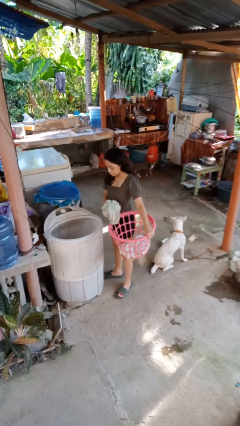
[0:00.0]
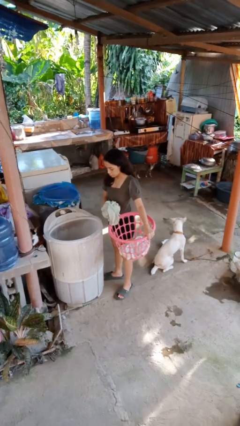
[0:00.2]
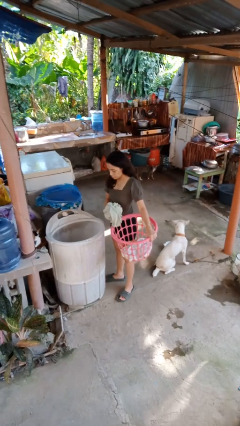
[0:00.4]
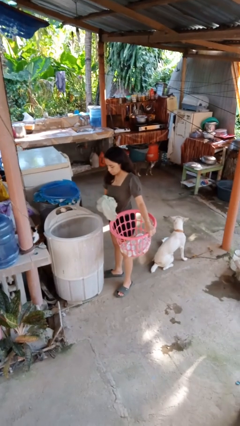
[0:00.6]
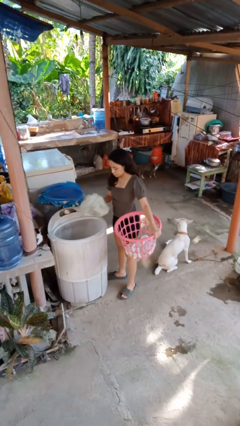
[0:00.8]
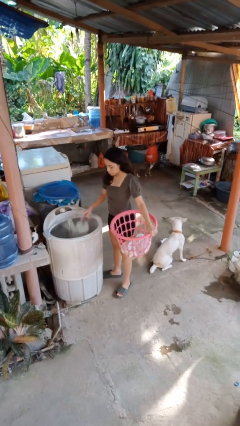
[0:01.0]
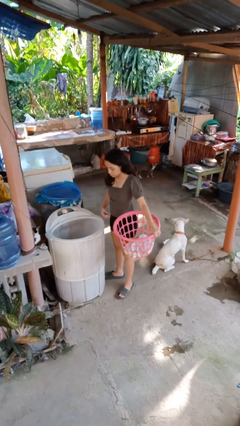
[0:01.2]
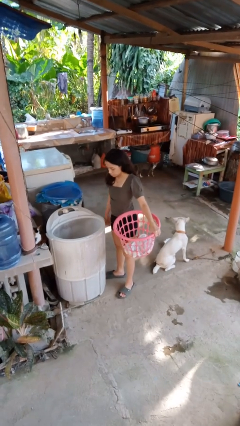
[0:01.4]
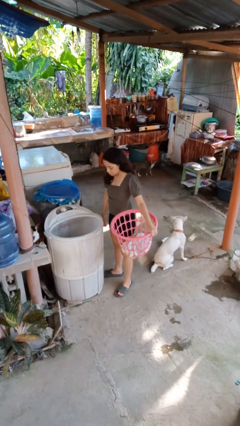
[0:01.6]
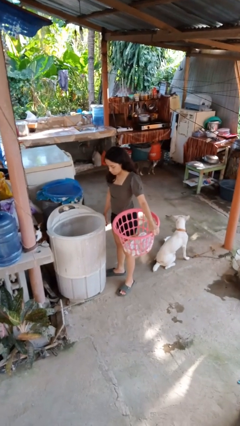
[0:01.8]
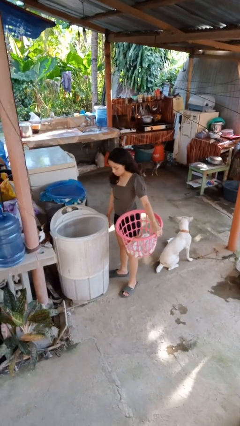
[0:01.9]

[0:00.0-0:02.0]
person loads dryer

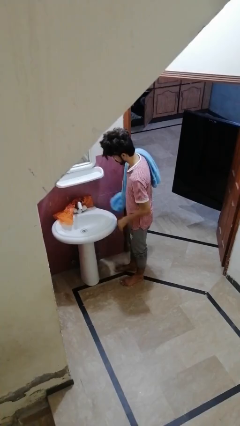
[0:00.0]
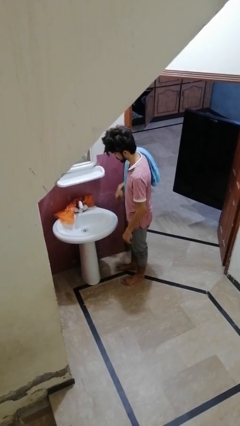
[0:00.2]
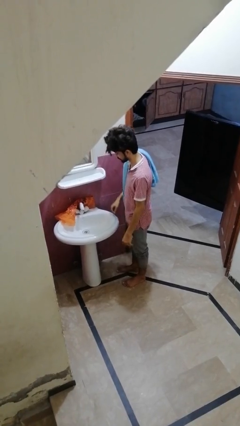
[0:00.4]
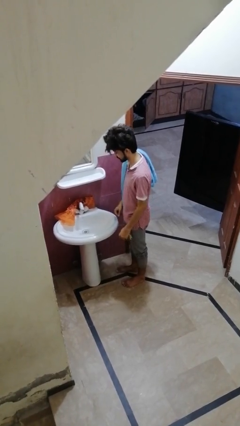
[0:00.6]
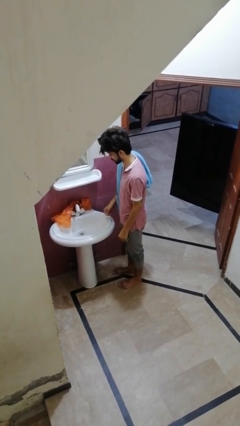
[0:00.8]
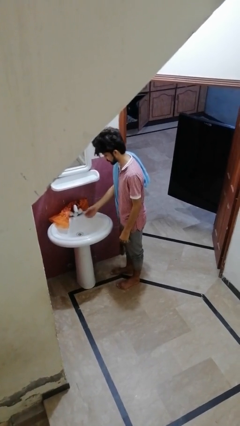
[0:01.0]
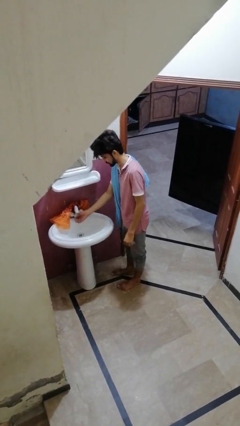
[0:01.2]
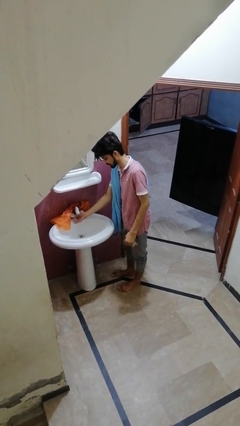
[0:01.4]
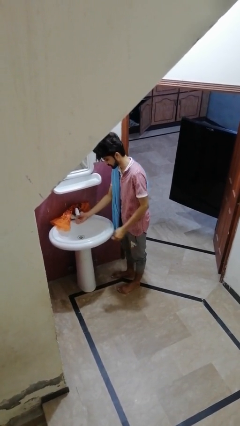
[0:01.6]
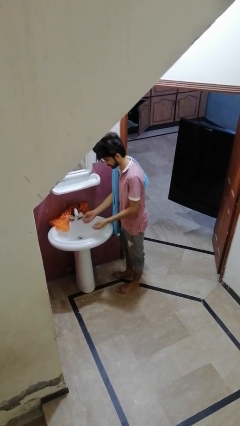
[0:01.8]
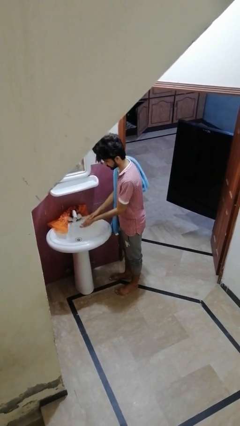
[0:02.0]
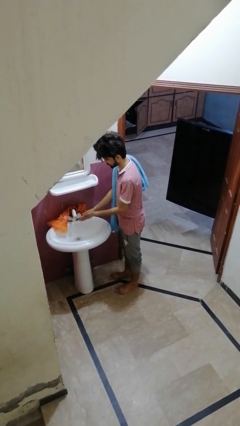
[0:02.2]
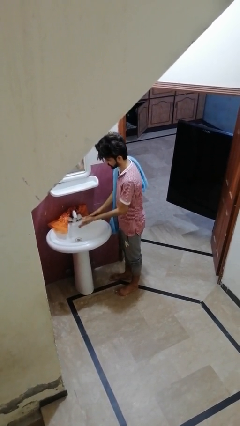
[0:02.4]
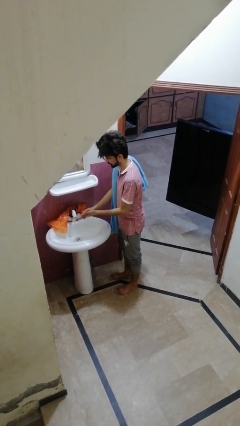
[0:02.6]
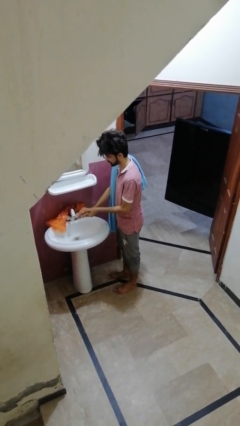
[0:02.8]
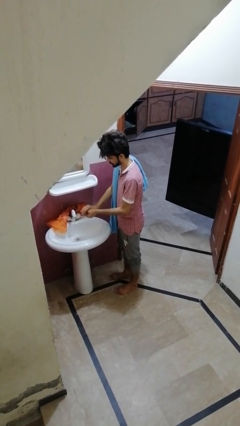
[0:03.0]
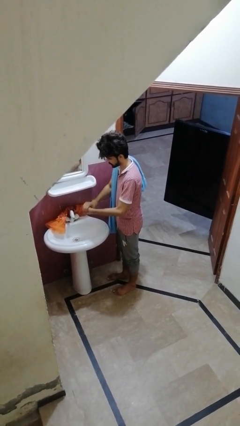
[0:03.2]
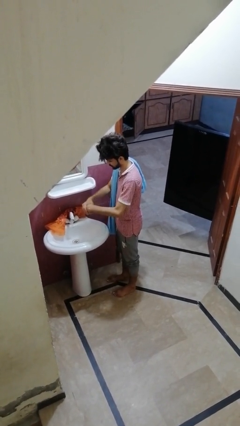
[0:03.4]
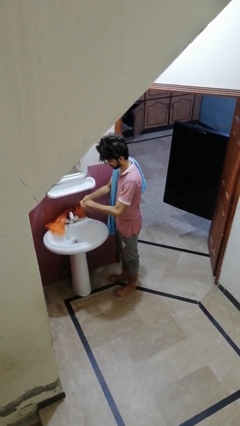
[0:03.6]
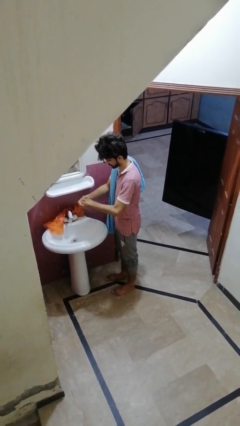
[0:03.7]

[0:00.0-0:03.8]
person washes hands

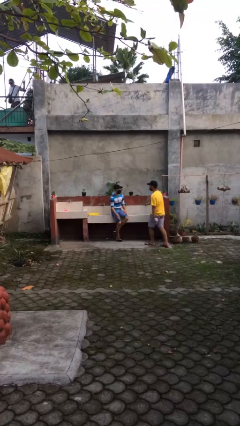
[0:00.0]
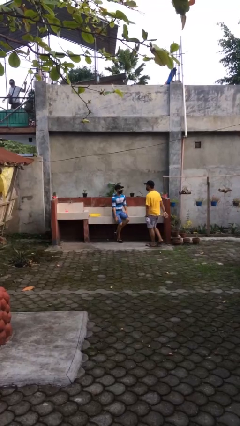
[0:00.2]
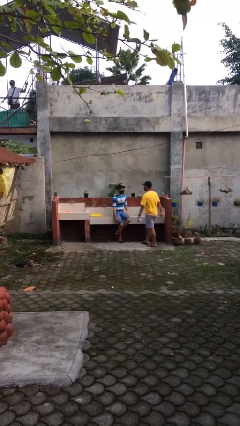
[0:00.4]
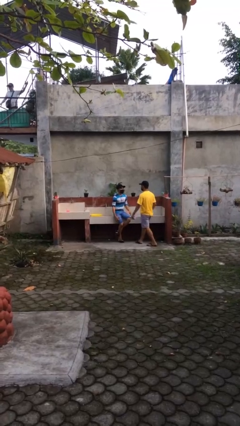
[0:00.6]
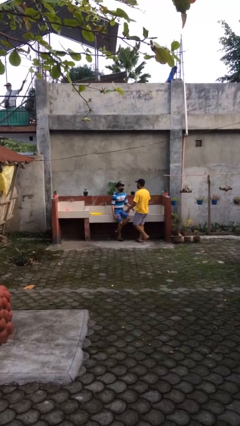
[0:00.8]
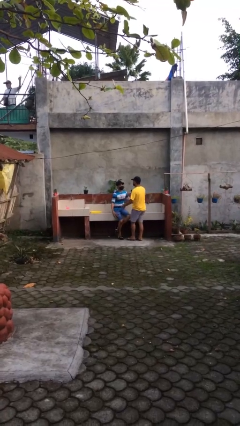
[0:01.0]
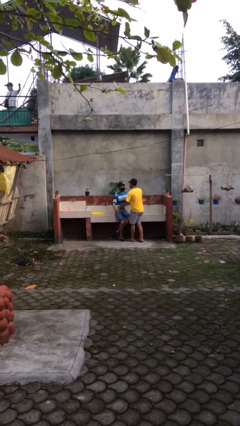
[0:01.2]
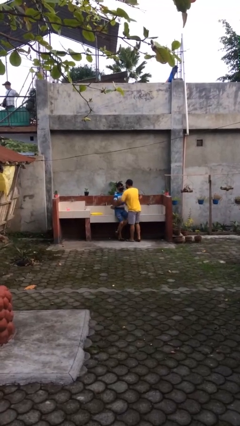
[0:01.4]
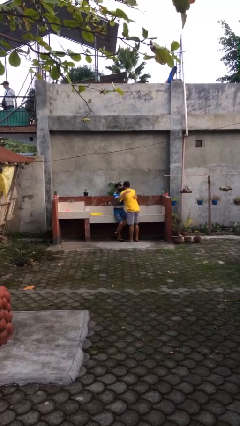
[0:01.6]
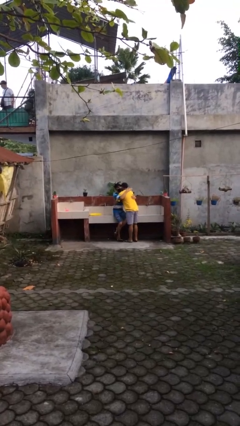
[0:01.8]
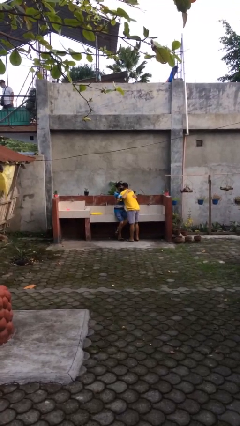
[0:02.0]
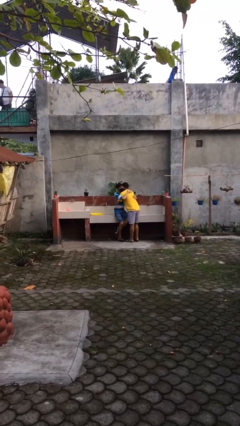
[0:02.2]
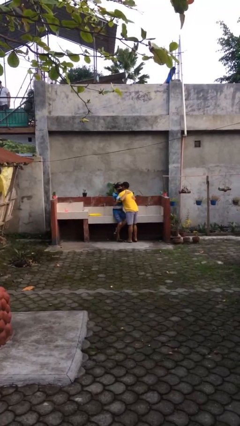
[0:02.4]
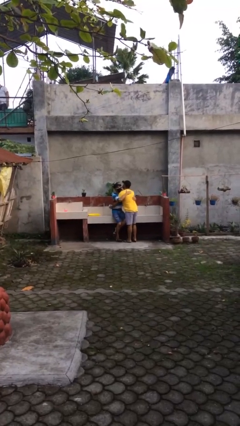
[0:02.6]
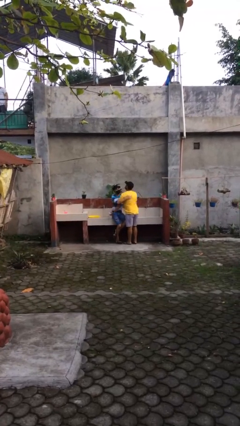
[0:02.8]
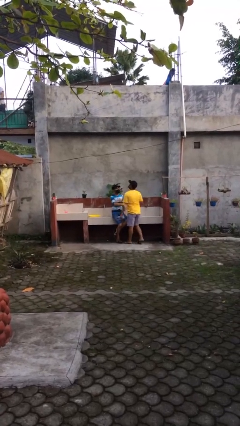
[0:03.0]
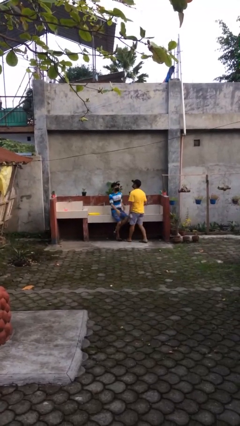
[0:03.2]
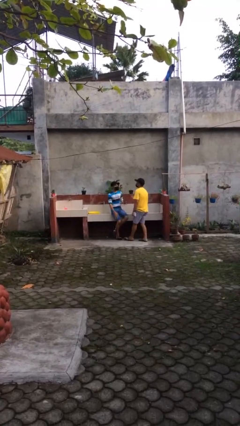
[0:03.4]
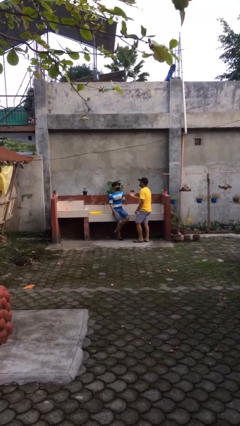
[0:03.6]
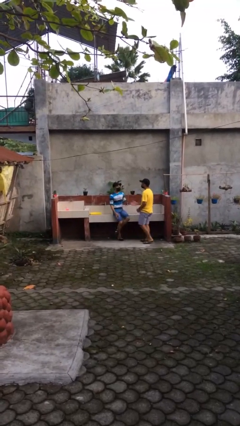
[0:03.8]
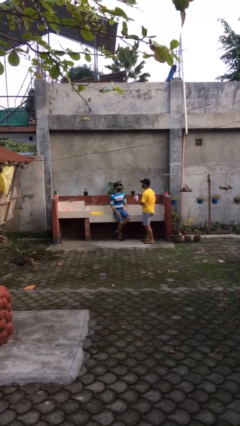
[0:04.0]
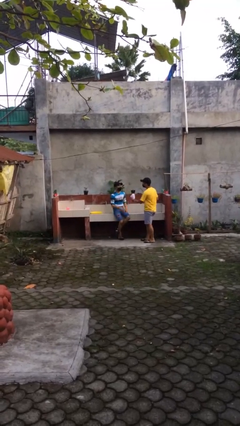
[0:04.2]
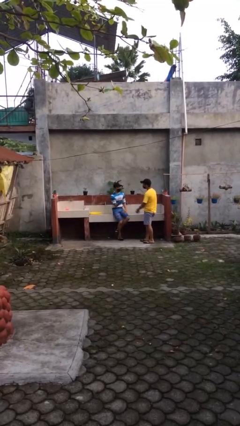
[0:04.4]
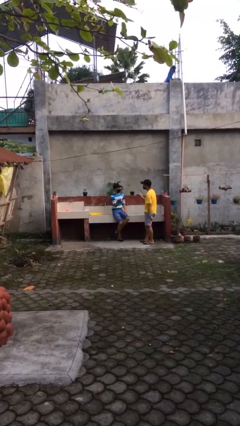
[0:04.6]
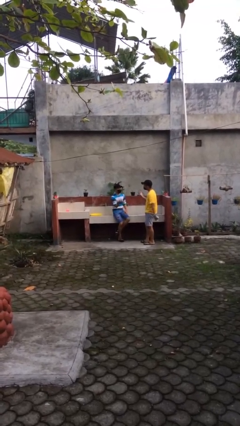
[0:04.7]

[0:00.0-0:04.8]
person embraces person

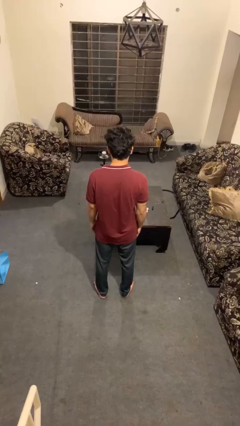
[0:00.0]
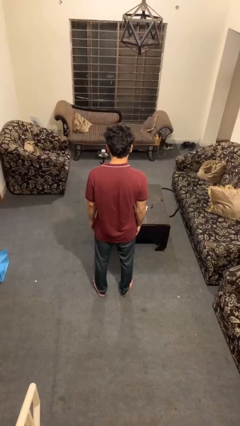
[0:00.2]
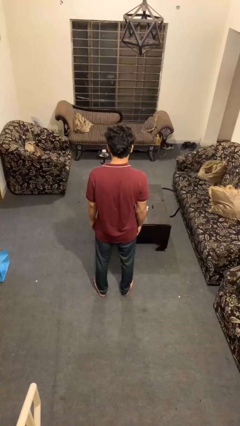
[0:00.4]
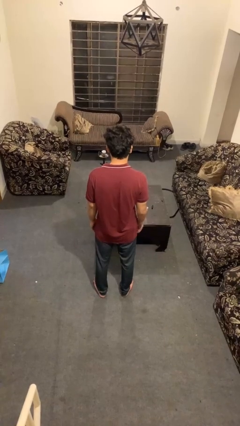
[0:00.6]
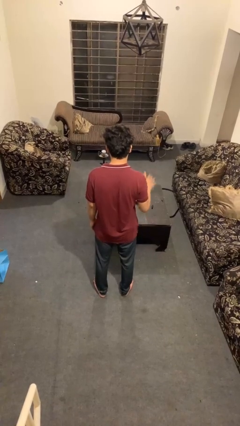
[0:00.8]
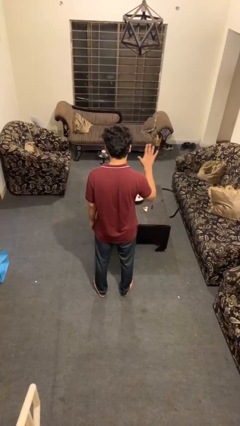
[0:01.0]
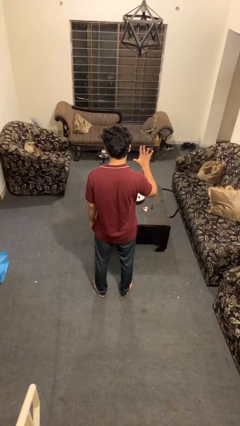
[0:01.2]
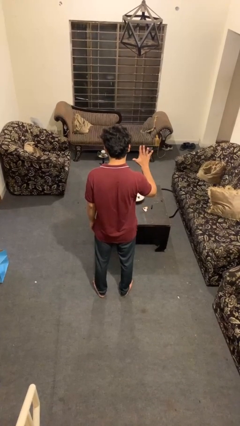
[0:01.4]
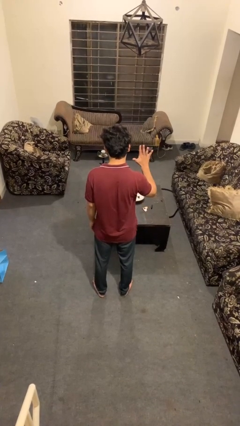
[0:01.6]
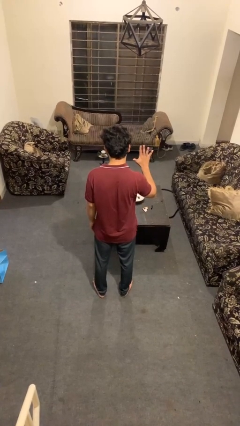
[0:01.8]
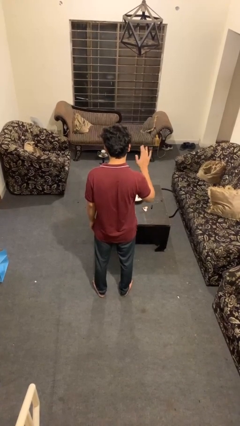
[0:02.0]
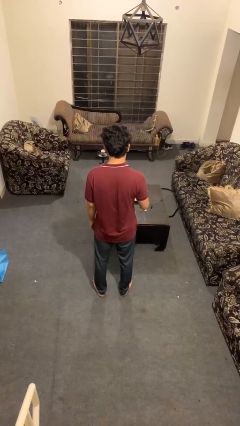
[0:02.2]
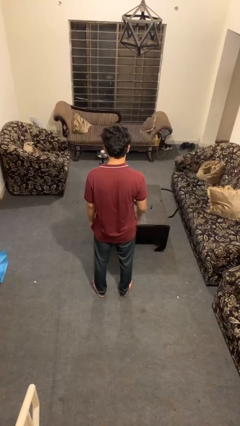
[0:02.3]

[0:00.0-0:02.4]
person gestures number five

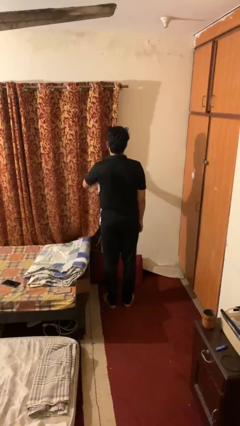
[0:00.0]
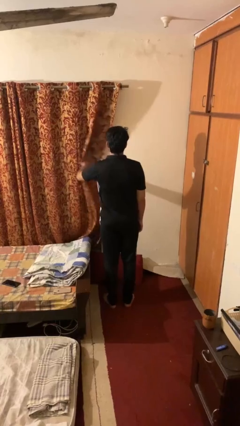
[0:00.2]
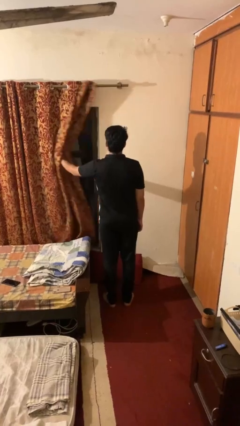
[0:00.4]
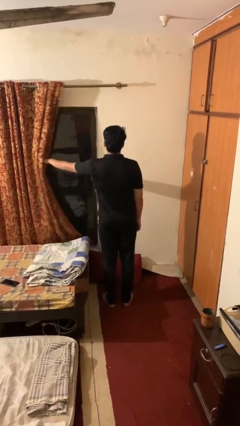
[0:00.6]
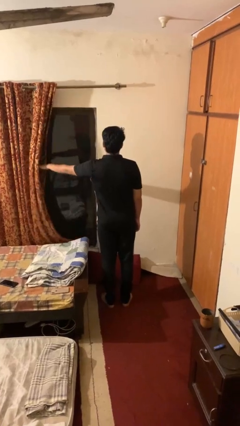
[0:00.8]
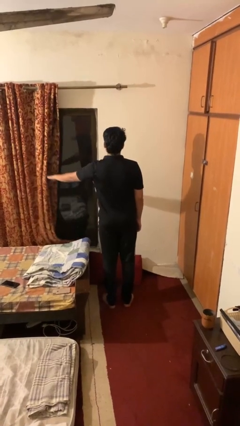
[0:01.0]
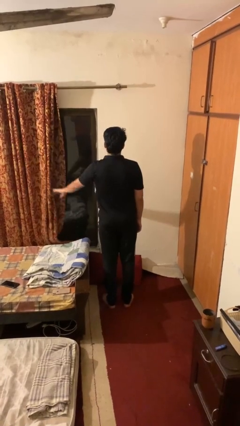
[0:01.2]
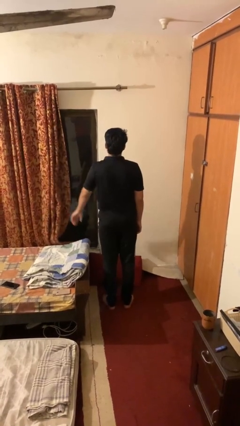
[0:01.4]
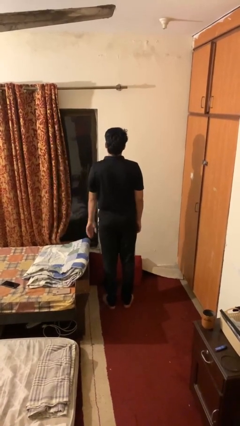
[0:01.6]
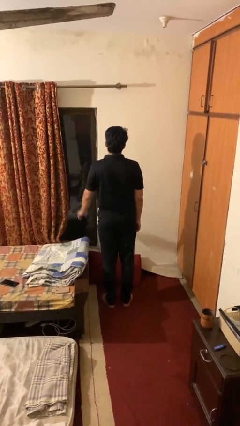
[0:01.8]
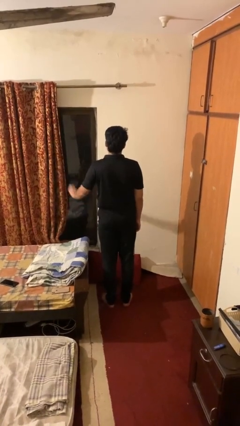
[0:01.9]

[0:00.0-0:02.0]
person opens curtains

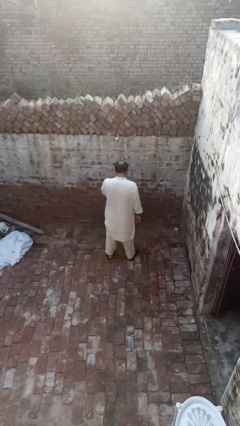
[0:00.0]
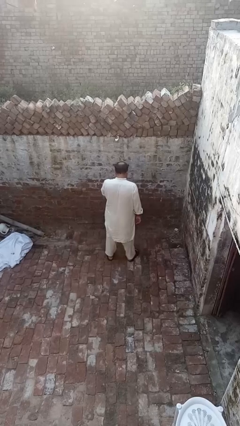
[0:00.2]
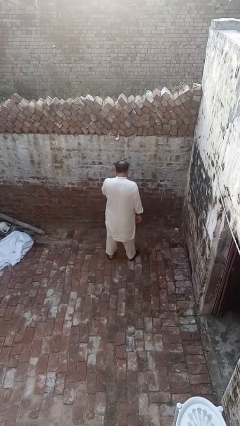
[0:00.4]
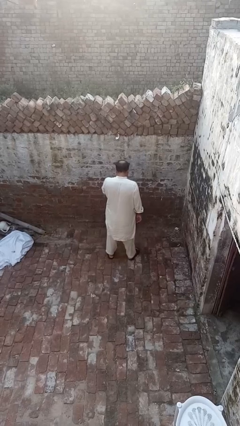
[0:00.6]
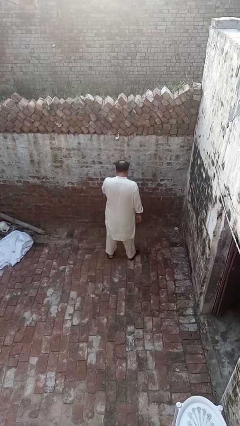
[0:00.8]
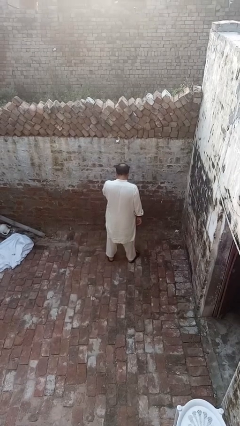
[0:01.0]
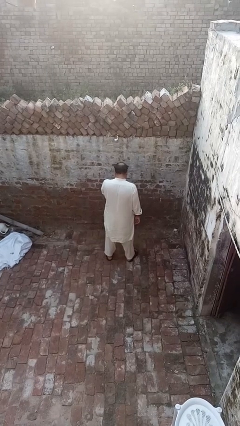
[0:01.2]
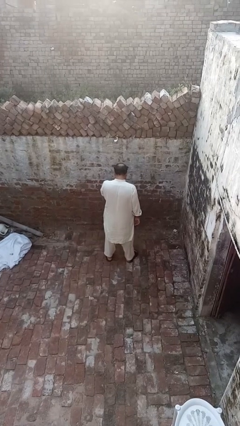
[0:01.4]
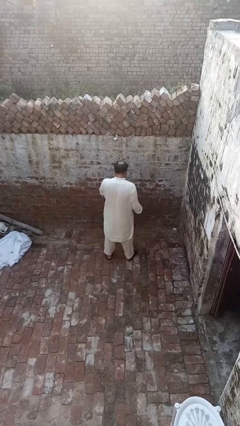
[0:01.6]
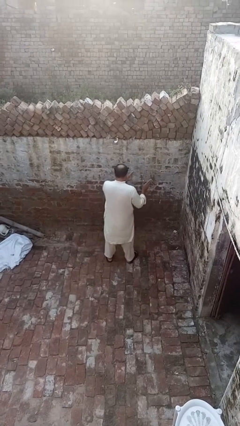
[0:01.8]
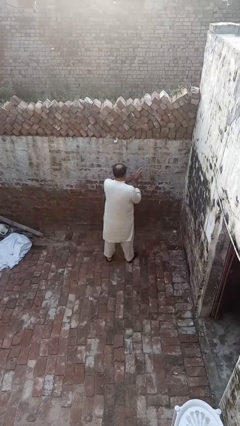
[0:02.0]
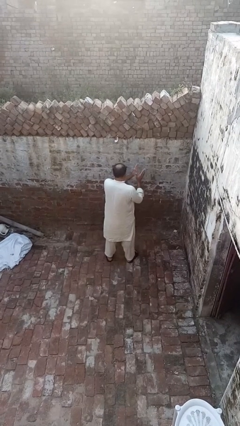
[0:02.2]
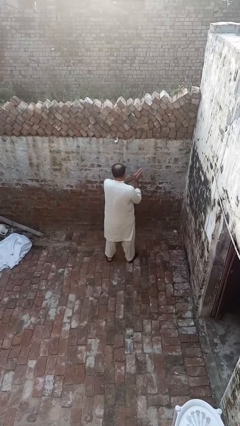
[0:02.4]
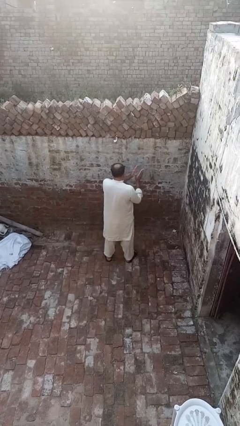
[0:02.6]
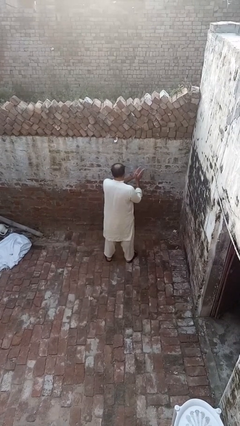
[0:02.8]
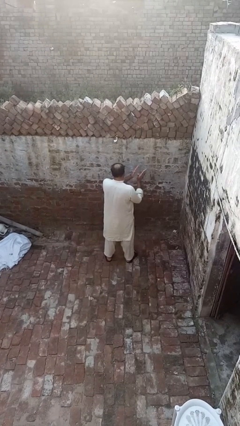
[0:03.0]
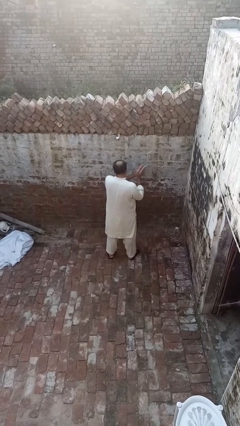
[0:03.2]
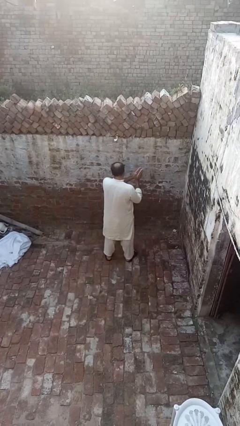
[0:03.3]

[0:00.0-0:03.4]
person claps hands
